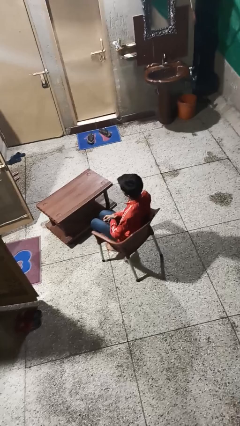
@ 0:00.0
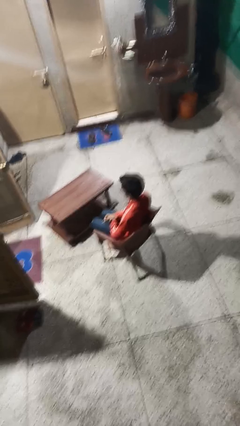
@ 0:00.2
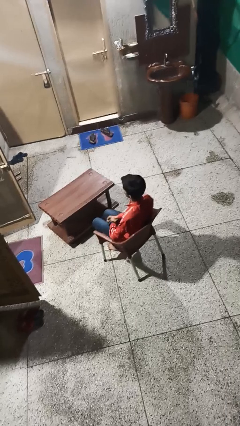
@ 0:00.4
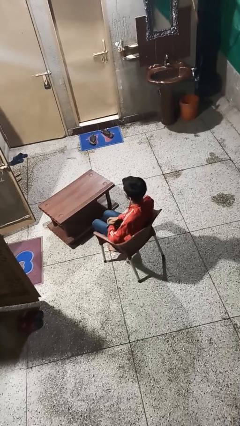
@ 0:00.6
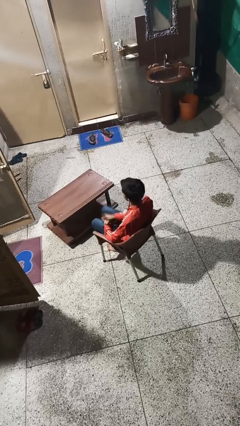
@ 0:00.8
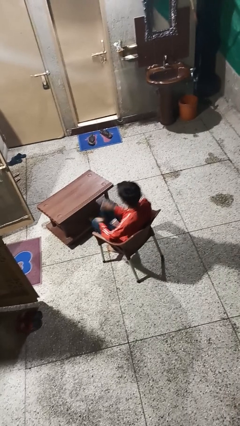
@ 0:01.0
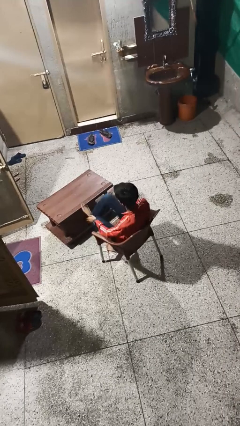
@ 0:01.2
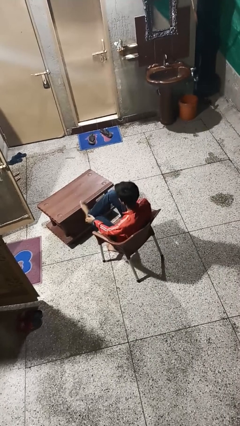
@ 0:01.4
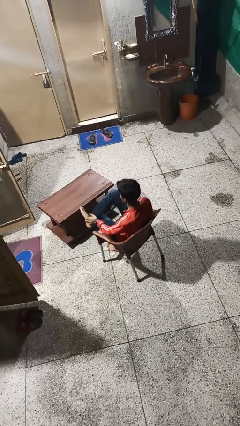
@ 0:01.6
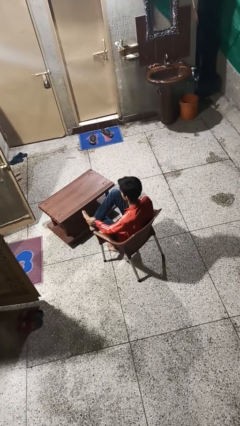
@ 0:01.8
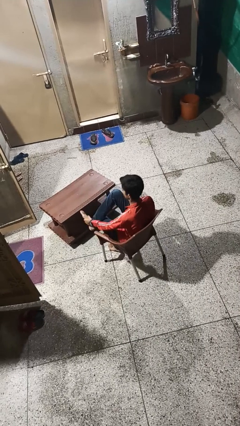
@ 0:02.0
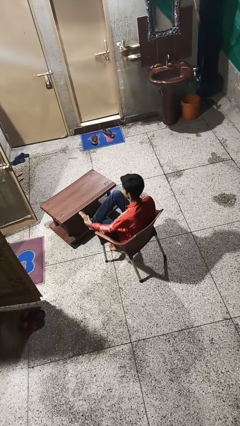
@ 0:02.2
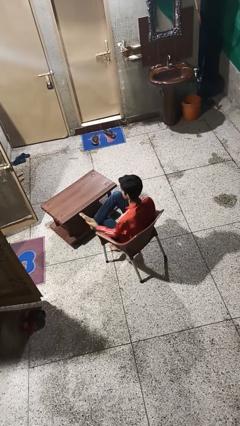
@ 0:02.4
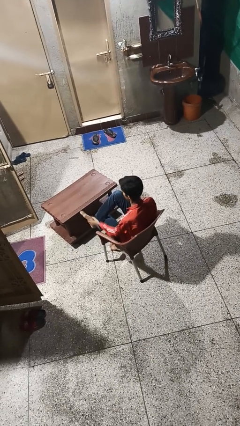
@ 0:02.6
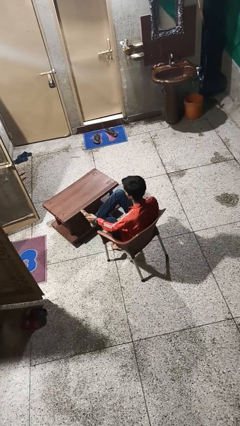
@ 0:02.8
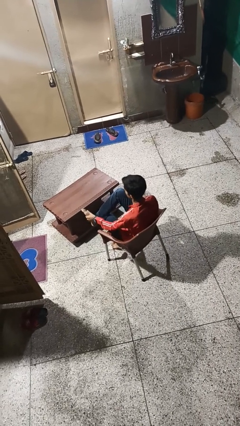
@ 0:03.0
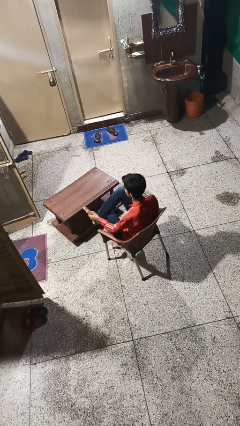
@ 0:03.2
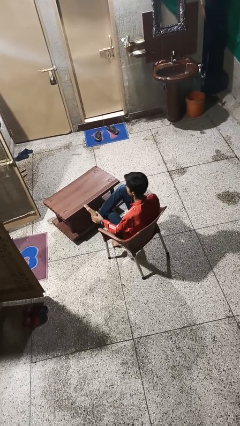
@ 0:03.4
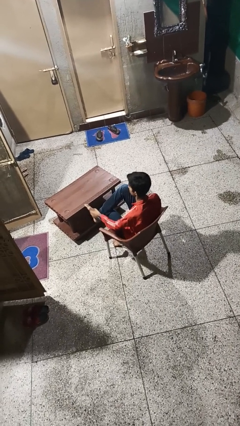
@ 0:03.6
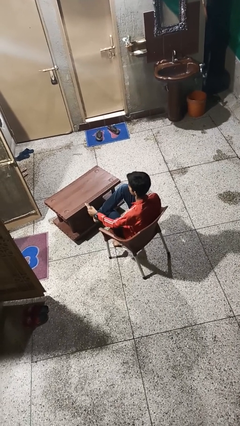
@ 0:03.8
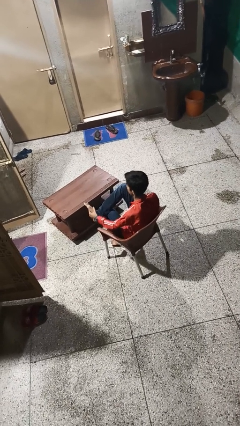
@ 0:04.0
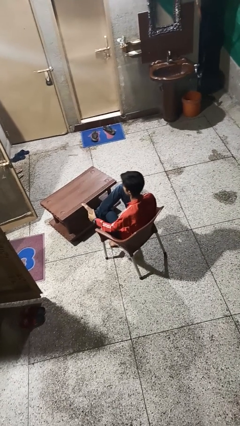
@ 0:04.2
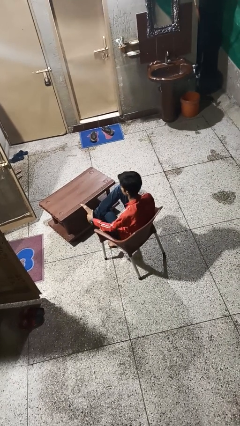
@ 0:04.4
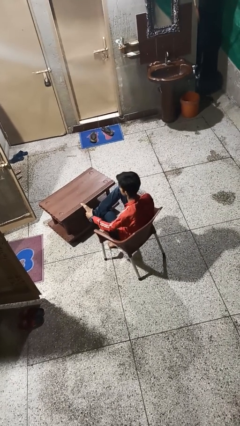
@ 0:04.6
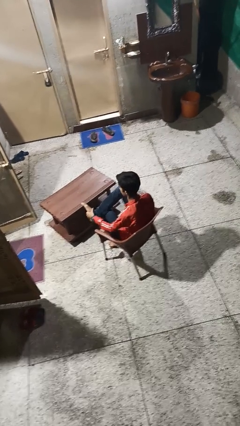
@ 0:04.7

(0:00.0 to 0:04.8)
person rubs foot

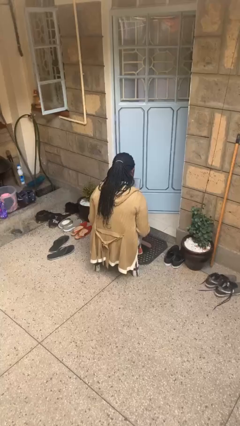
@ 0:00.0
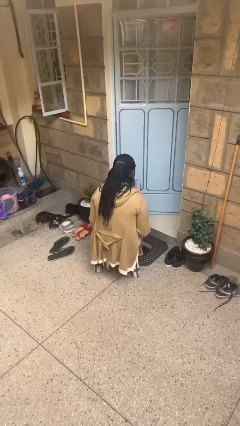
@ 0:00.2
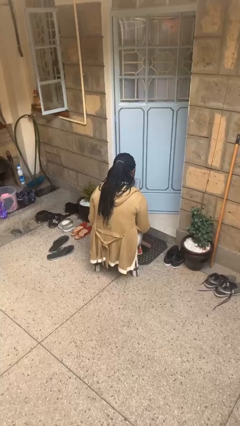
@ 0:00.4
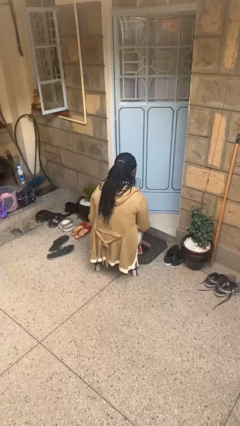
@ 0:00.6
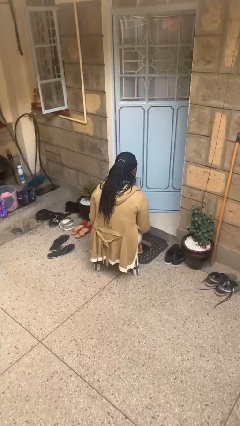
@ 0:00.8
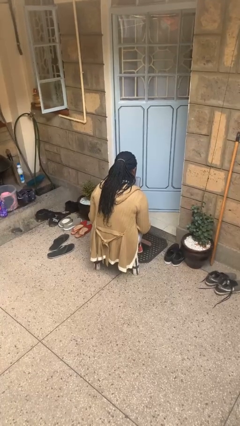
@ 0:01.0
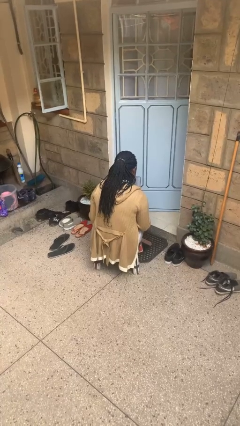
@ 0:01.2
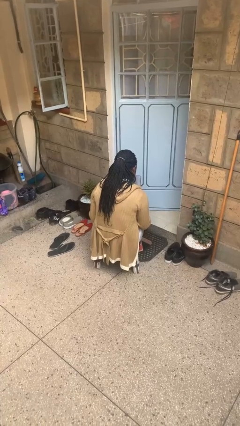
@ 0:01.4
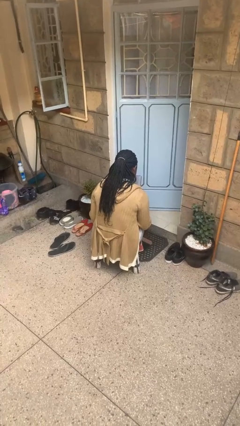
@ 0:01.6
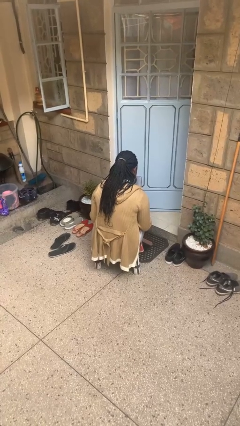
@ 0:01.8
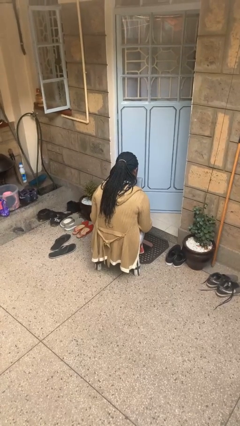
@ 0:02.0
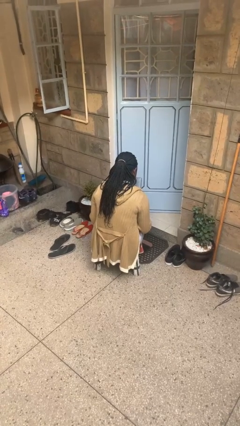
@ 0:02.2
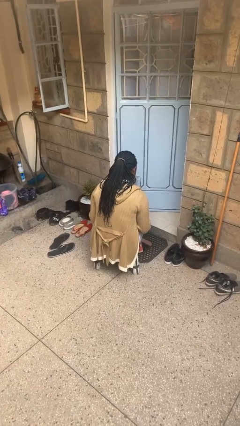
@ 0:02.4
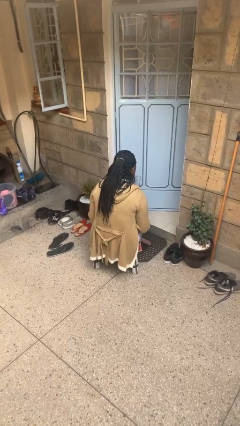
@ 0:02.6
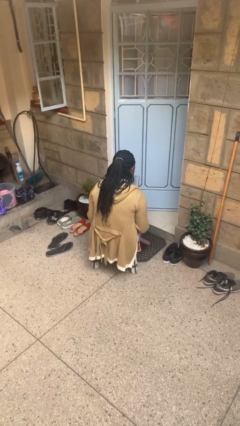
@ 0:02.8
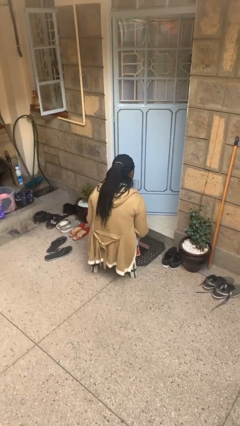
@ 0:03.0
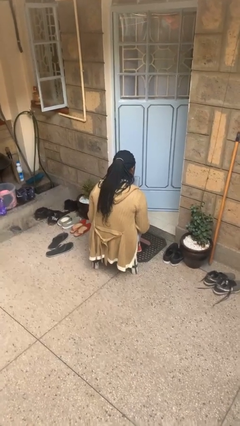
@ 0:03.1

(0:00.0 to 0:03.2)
person interacts with tablet

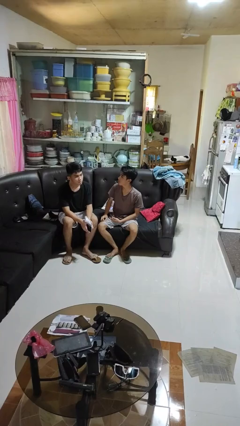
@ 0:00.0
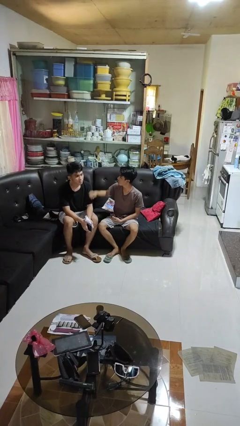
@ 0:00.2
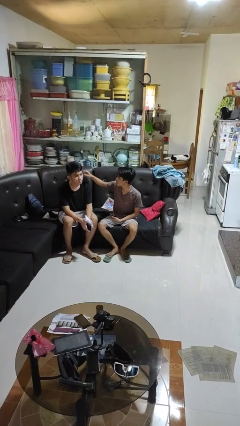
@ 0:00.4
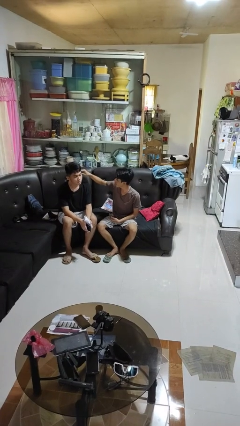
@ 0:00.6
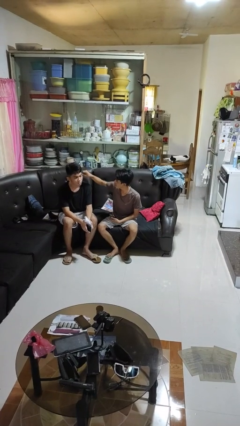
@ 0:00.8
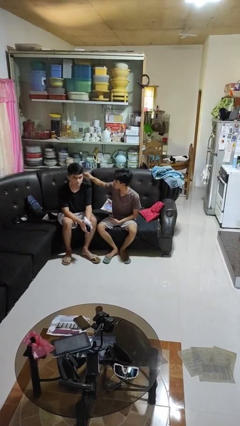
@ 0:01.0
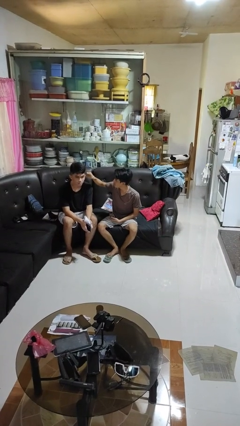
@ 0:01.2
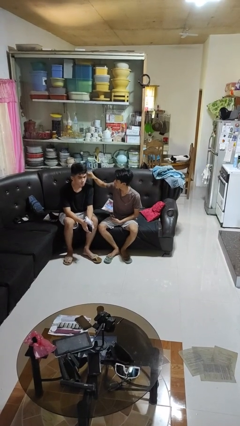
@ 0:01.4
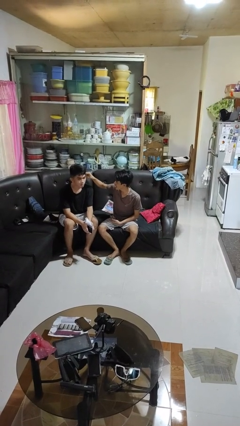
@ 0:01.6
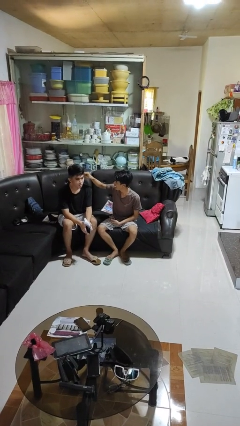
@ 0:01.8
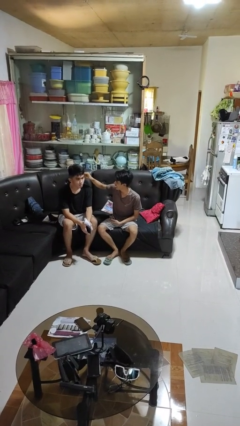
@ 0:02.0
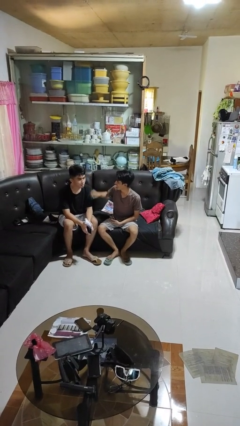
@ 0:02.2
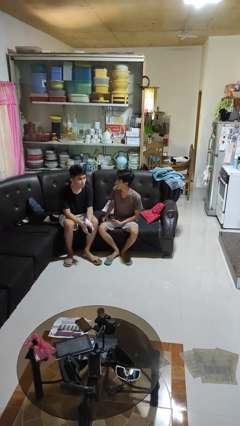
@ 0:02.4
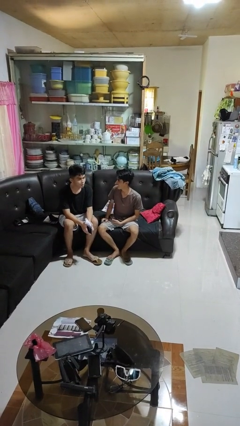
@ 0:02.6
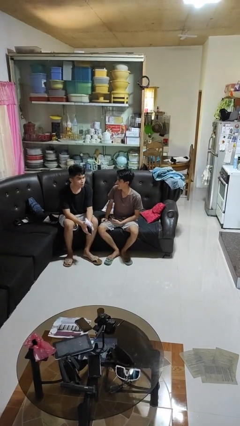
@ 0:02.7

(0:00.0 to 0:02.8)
person touches face of person

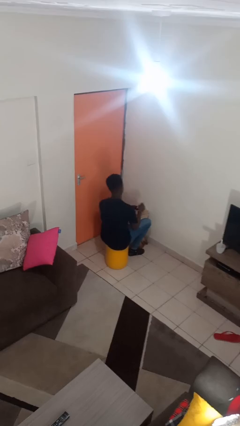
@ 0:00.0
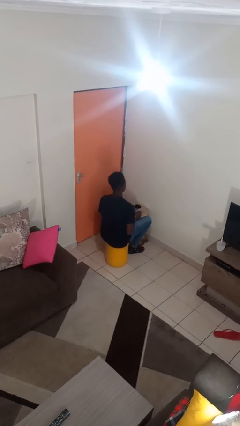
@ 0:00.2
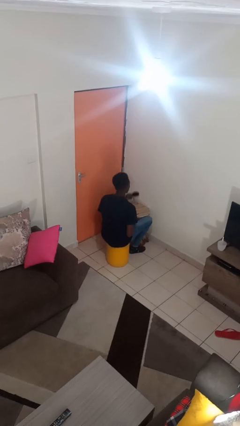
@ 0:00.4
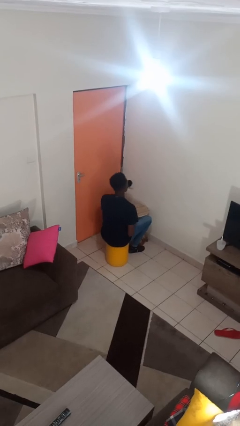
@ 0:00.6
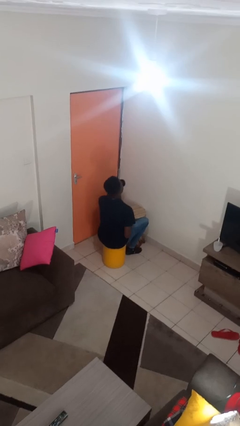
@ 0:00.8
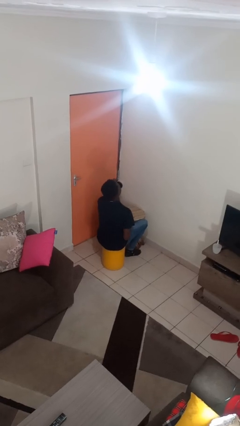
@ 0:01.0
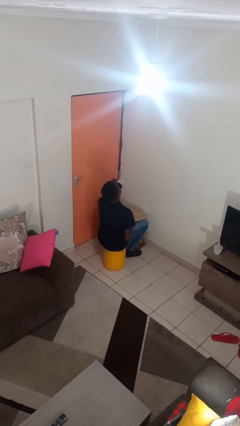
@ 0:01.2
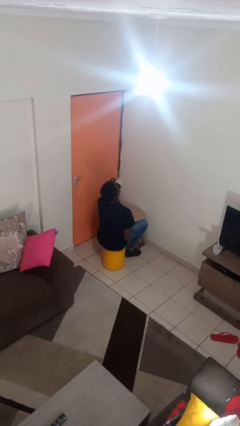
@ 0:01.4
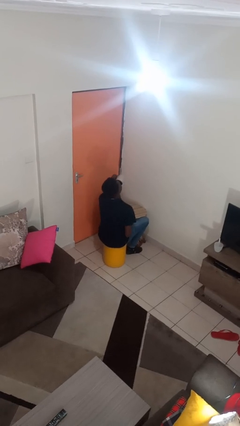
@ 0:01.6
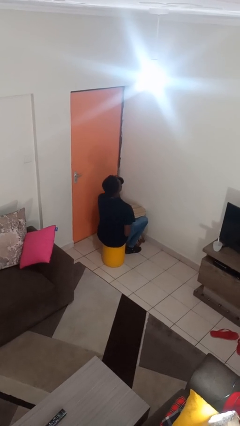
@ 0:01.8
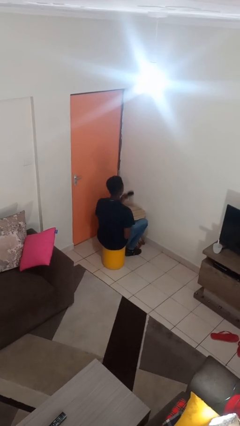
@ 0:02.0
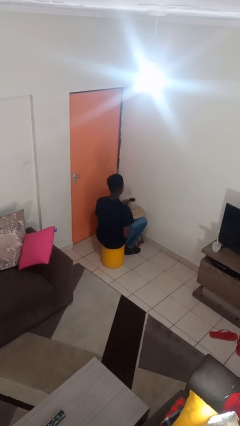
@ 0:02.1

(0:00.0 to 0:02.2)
person drinks from mug

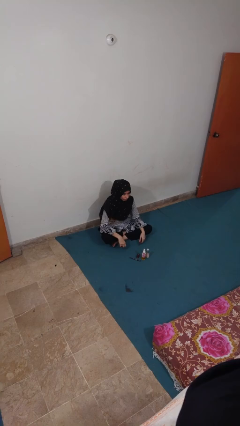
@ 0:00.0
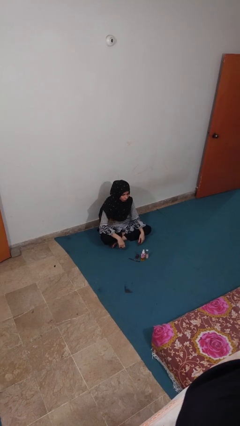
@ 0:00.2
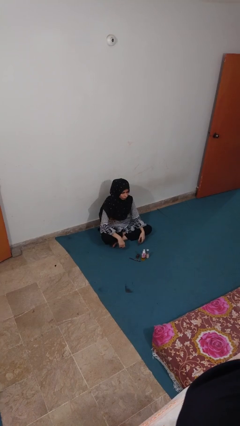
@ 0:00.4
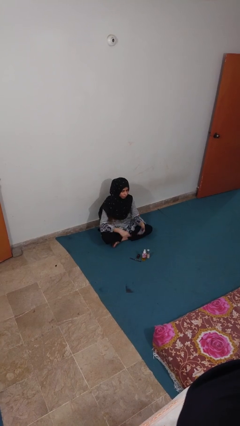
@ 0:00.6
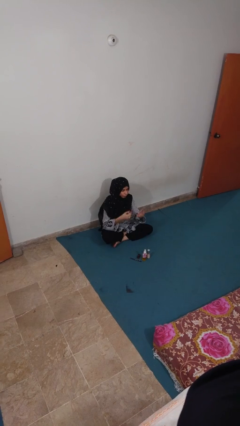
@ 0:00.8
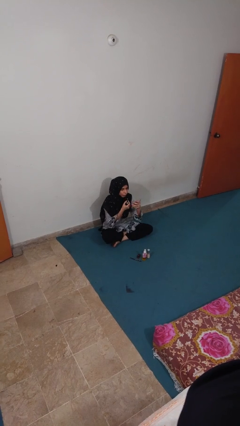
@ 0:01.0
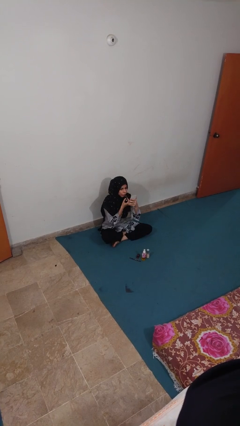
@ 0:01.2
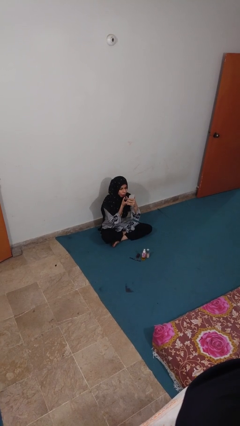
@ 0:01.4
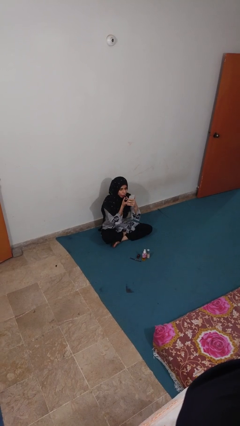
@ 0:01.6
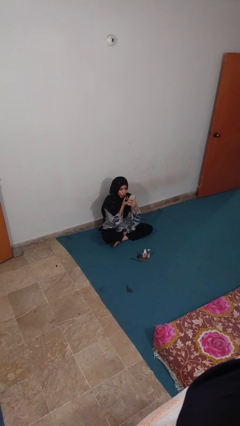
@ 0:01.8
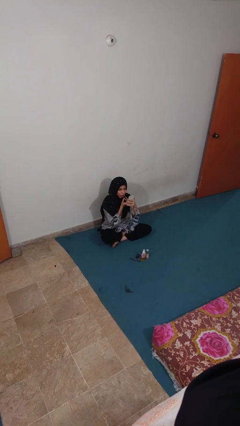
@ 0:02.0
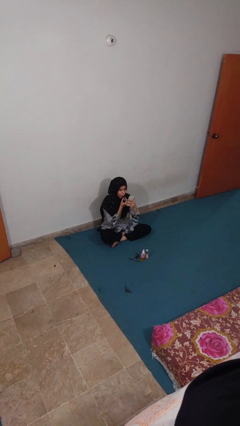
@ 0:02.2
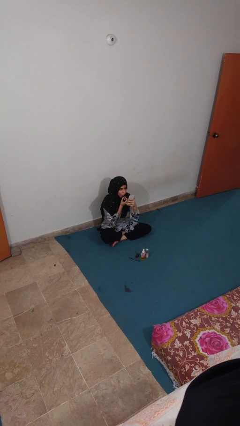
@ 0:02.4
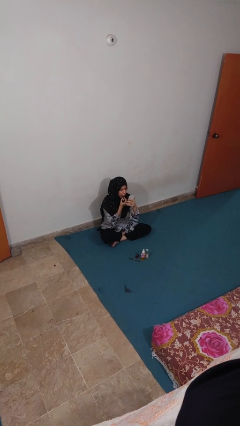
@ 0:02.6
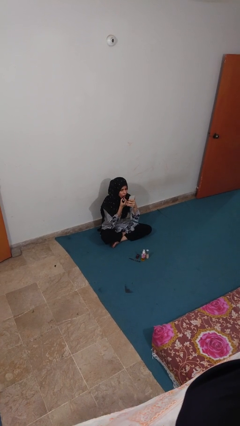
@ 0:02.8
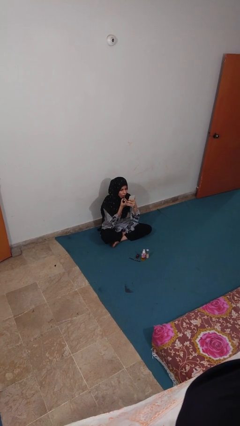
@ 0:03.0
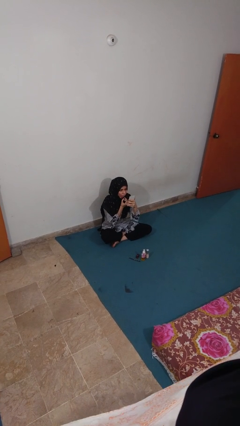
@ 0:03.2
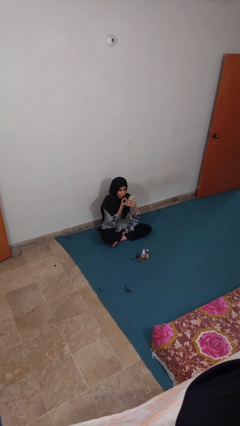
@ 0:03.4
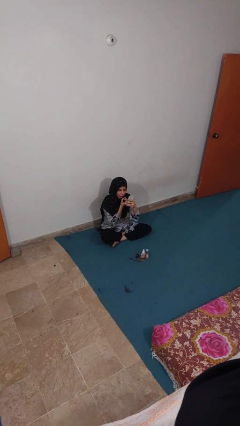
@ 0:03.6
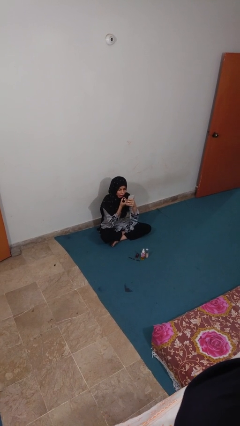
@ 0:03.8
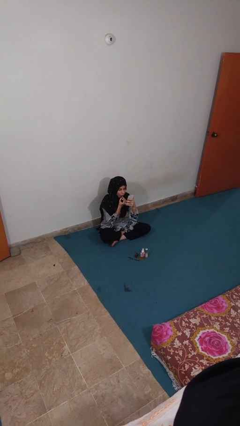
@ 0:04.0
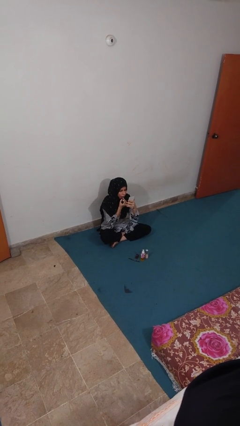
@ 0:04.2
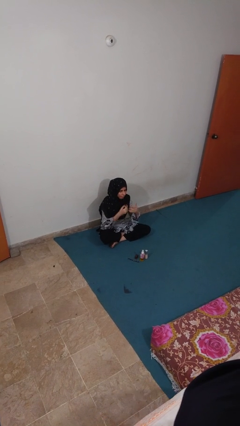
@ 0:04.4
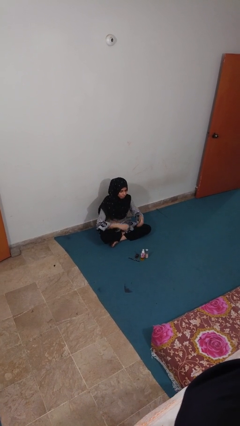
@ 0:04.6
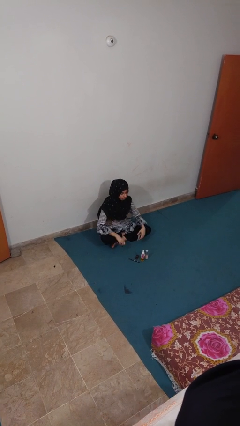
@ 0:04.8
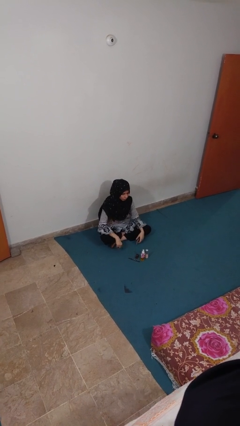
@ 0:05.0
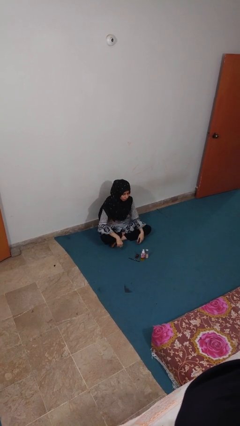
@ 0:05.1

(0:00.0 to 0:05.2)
person applies lip makeup
